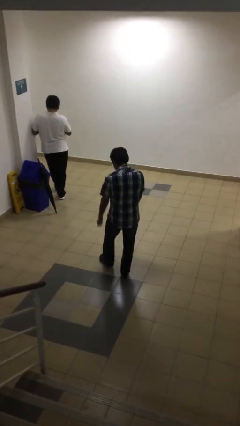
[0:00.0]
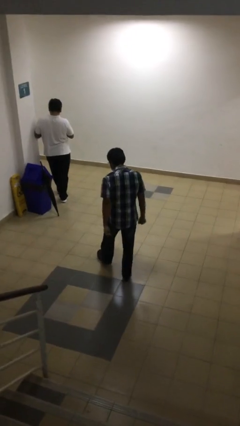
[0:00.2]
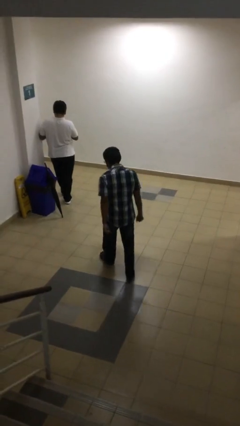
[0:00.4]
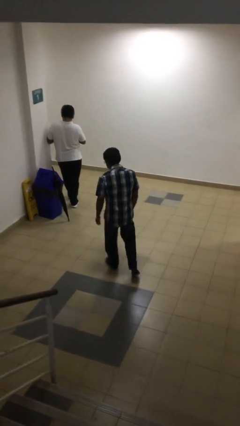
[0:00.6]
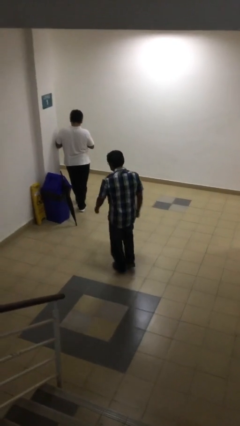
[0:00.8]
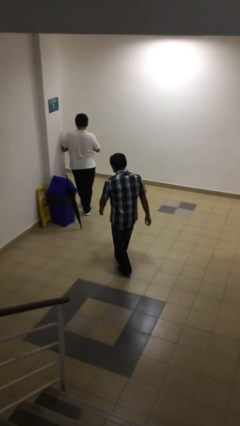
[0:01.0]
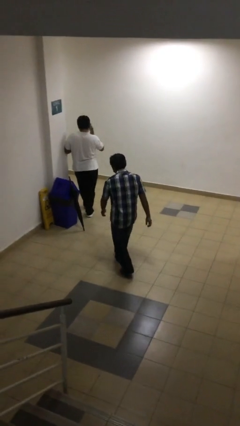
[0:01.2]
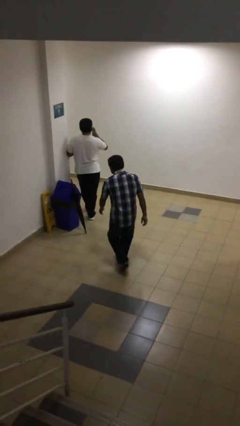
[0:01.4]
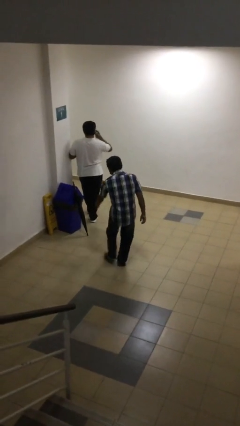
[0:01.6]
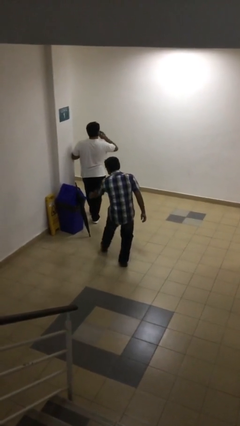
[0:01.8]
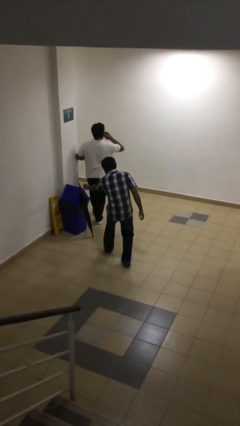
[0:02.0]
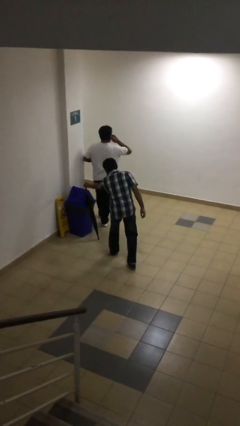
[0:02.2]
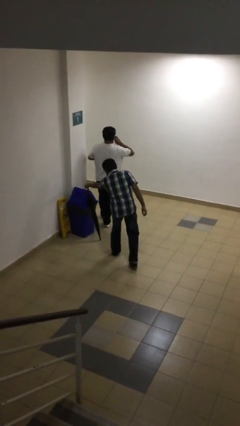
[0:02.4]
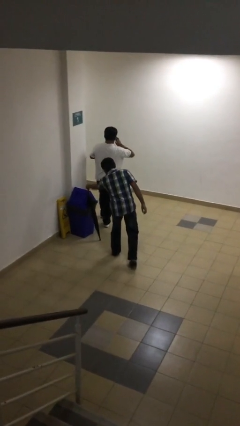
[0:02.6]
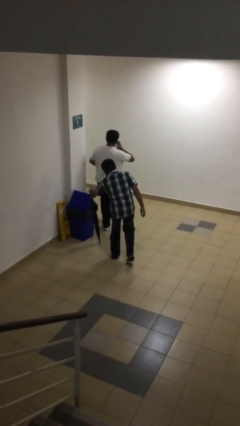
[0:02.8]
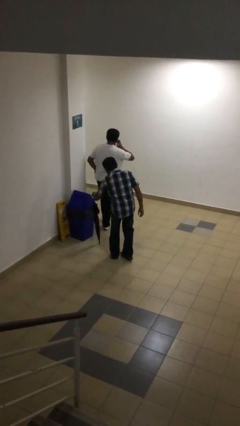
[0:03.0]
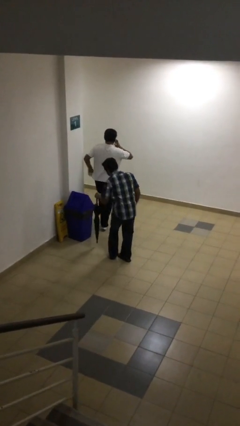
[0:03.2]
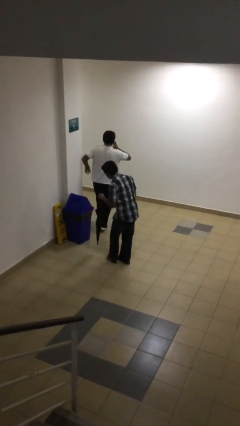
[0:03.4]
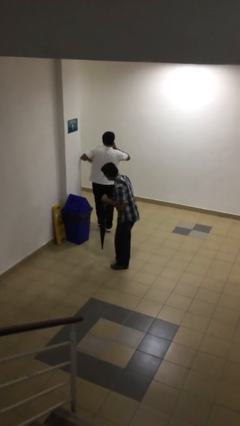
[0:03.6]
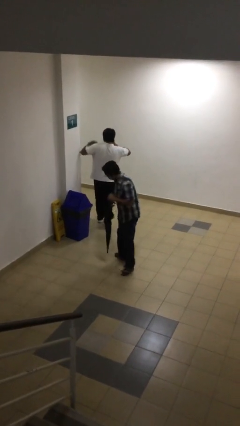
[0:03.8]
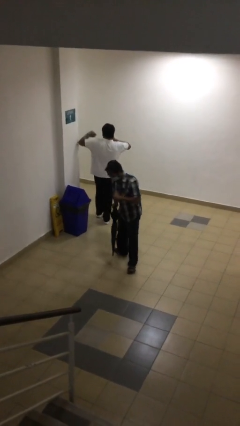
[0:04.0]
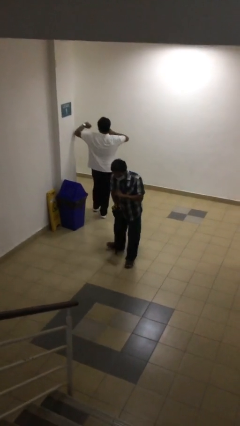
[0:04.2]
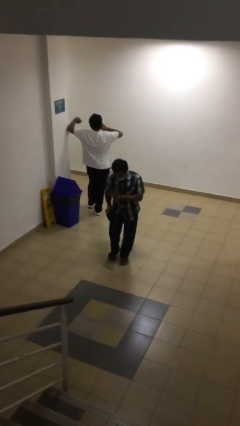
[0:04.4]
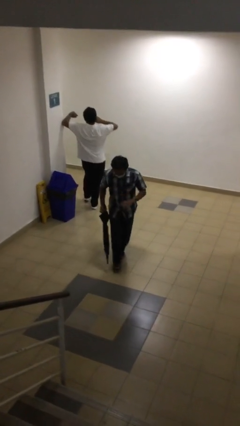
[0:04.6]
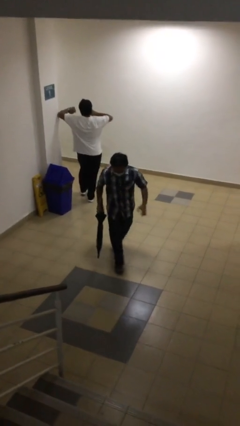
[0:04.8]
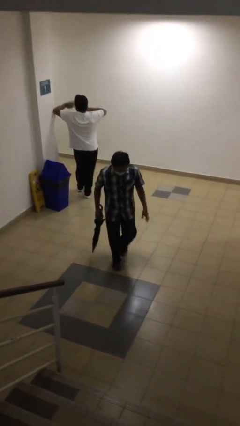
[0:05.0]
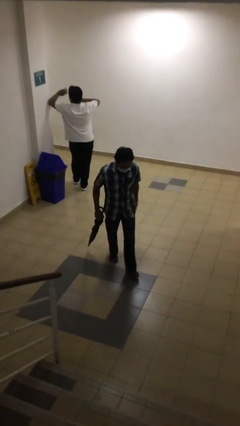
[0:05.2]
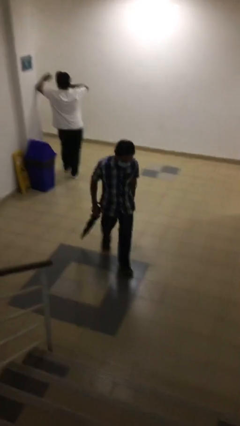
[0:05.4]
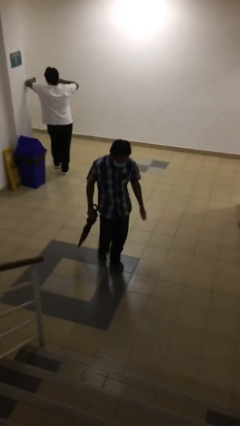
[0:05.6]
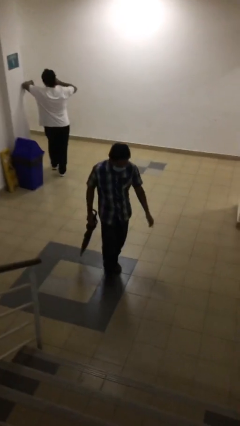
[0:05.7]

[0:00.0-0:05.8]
person steals object from person

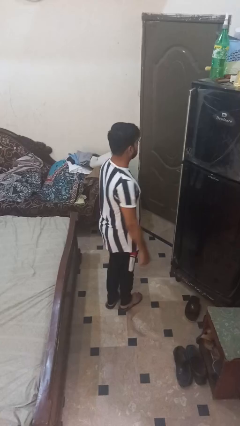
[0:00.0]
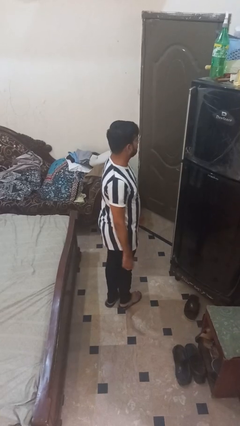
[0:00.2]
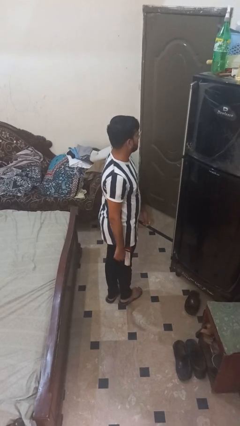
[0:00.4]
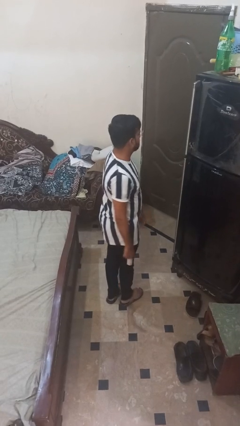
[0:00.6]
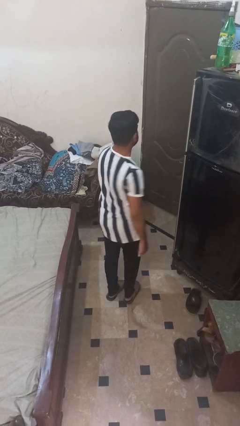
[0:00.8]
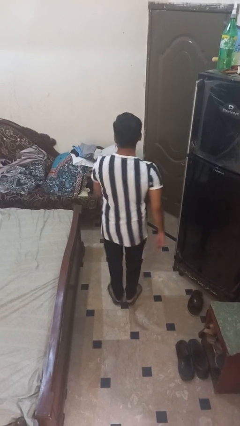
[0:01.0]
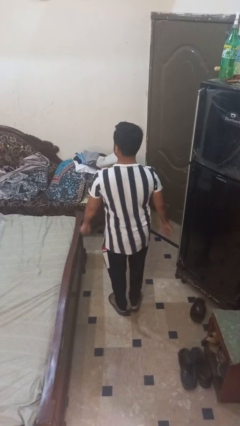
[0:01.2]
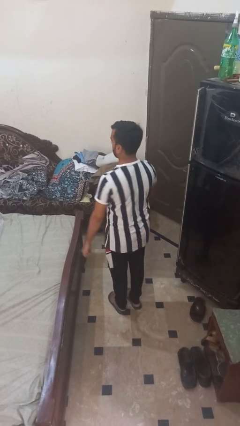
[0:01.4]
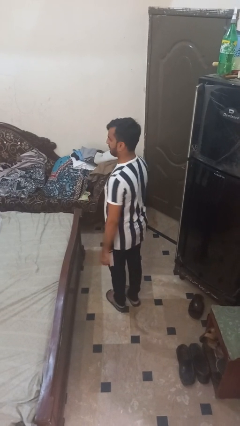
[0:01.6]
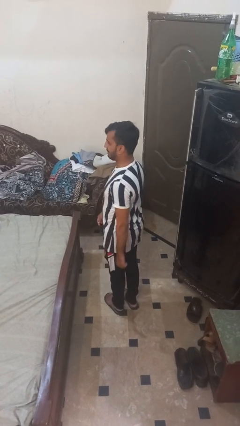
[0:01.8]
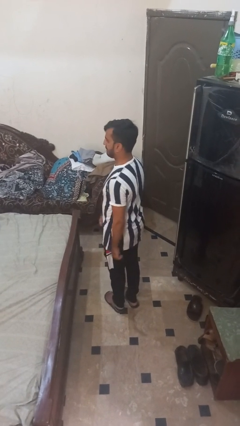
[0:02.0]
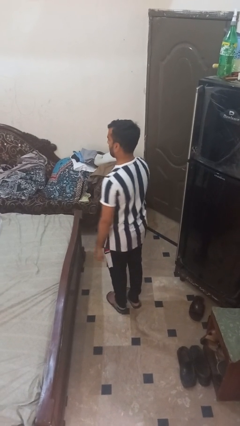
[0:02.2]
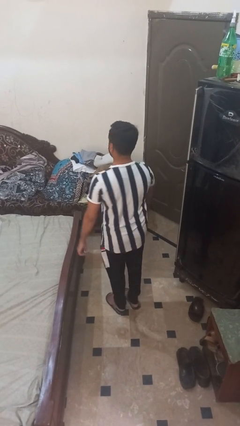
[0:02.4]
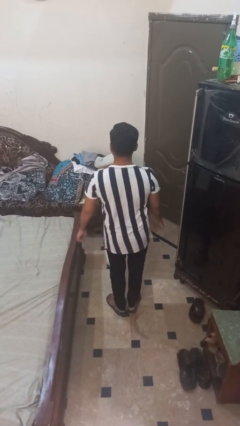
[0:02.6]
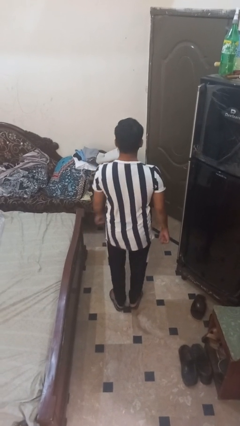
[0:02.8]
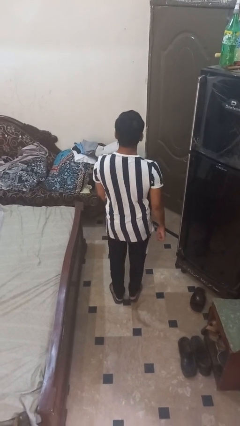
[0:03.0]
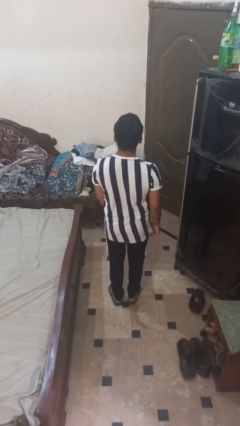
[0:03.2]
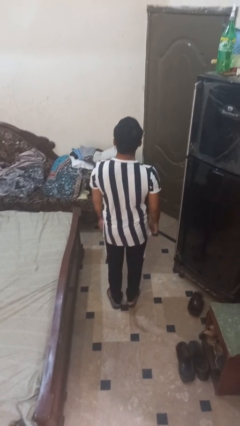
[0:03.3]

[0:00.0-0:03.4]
person twirls

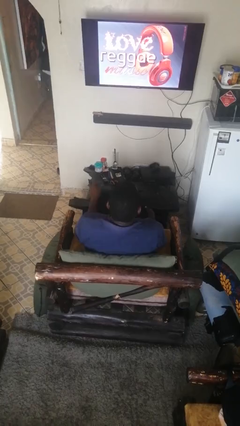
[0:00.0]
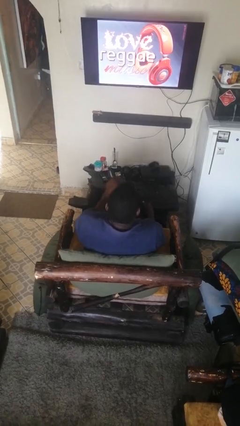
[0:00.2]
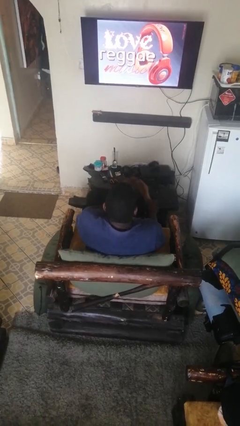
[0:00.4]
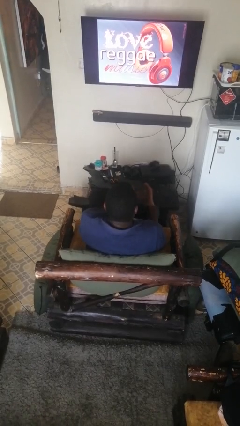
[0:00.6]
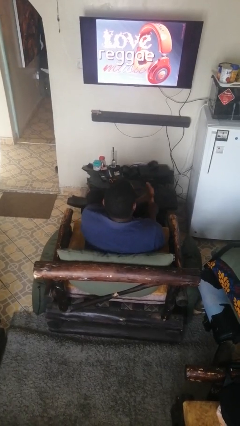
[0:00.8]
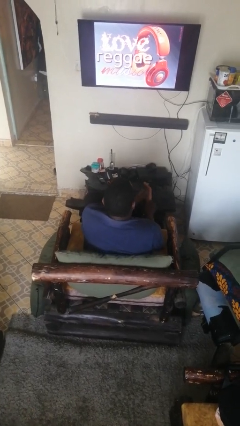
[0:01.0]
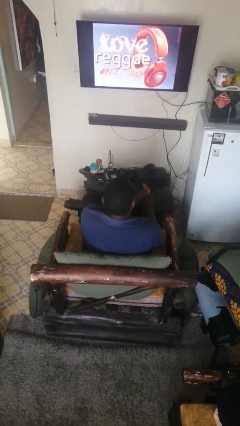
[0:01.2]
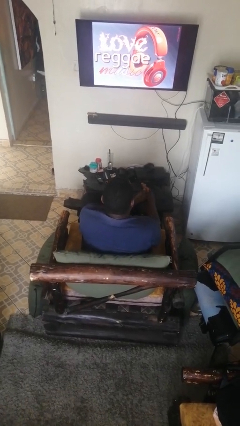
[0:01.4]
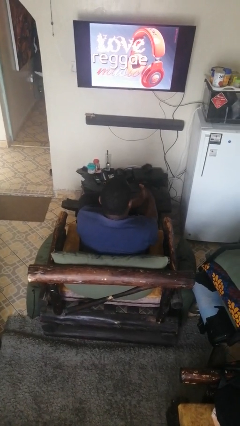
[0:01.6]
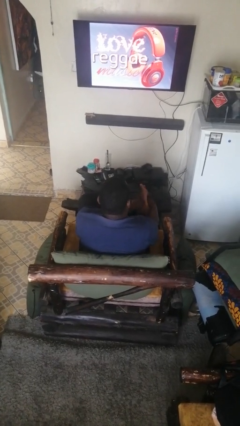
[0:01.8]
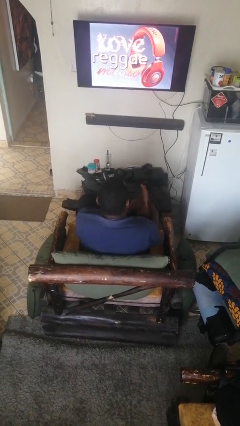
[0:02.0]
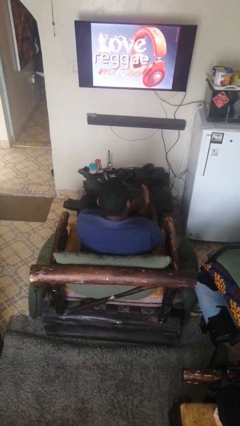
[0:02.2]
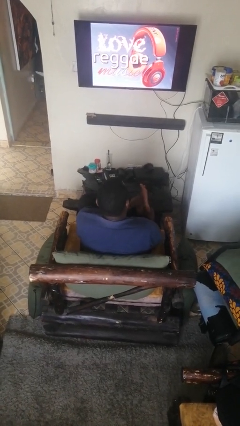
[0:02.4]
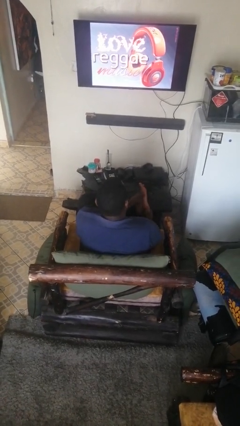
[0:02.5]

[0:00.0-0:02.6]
person rubs foot

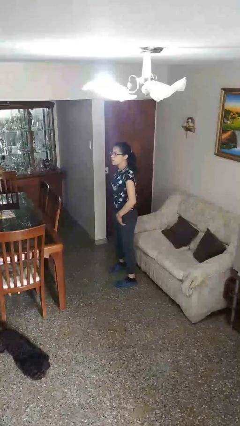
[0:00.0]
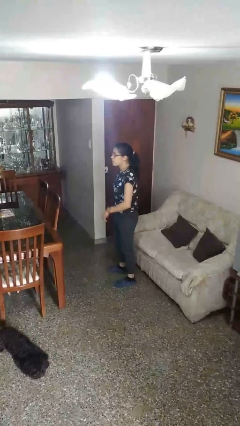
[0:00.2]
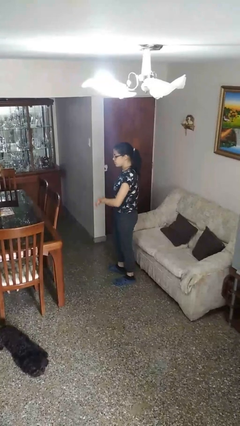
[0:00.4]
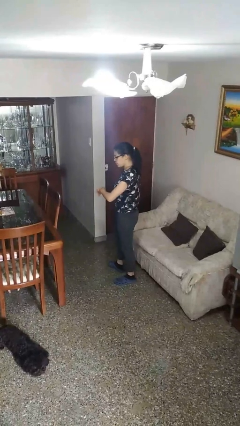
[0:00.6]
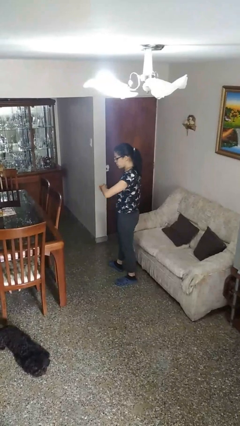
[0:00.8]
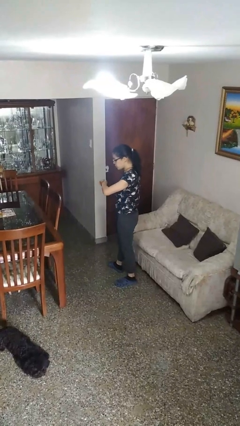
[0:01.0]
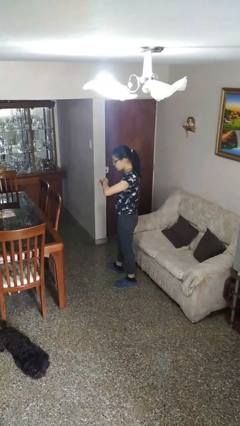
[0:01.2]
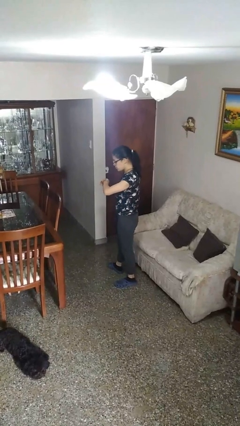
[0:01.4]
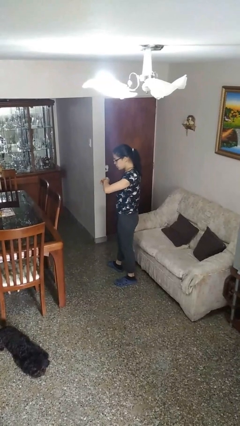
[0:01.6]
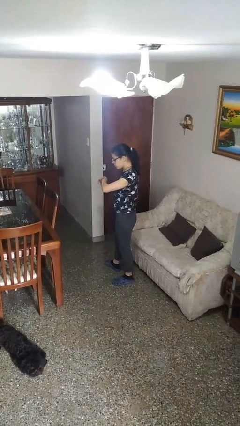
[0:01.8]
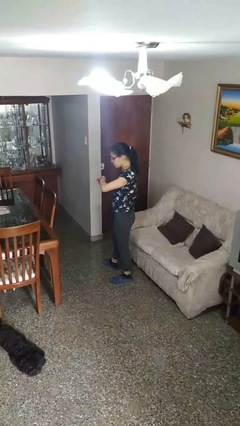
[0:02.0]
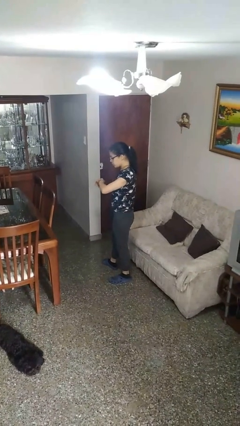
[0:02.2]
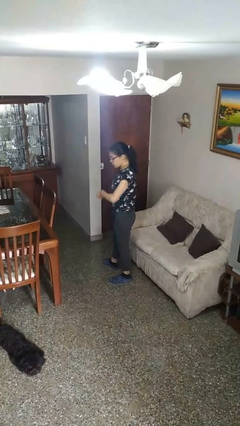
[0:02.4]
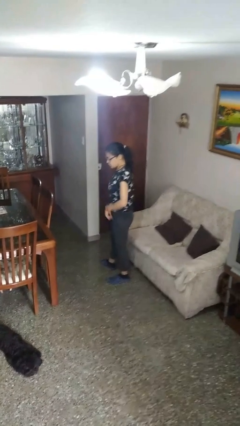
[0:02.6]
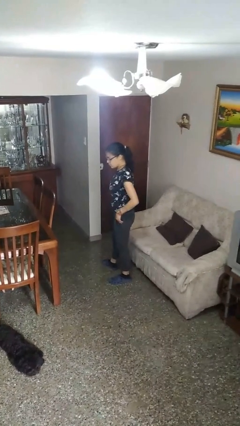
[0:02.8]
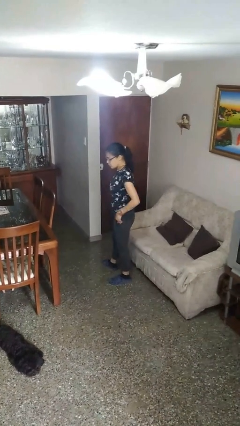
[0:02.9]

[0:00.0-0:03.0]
person looks at wristwatch

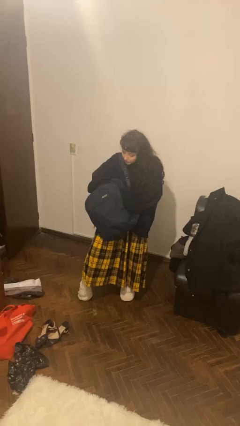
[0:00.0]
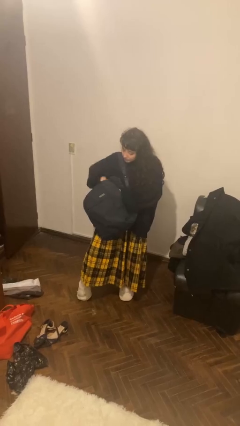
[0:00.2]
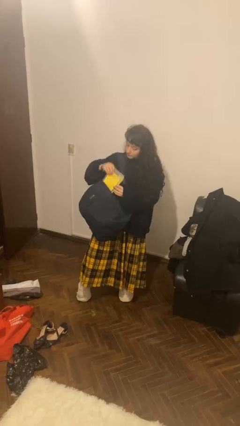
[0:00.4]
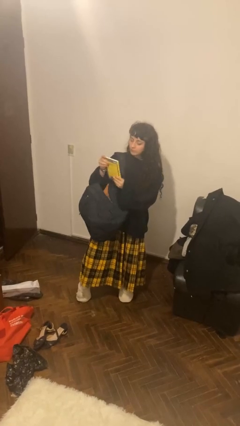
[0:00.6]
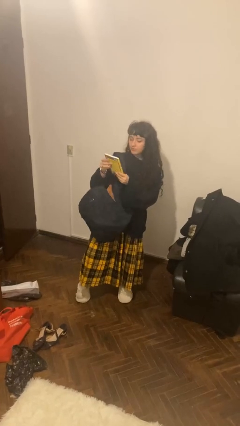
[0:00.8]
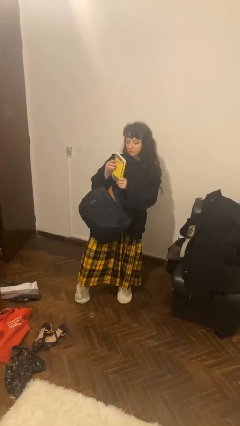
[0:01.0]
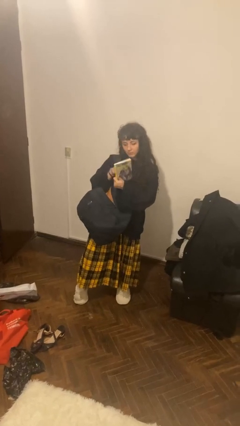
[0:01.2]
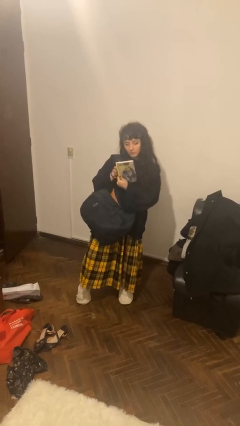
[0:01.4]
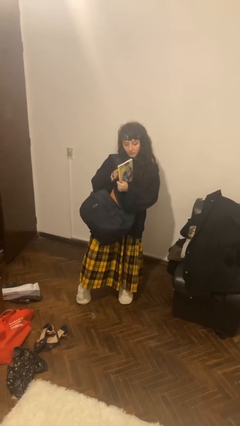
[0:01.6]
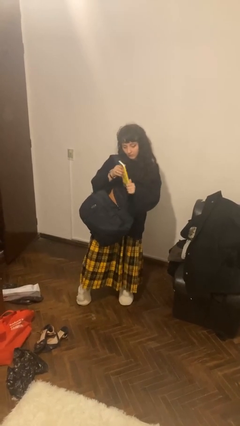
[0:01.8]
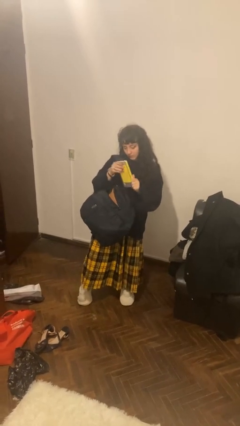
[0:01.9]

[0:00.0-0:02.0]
person takes object from backpack

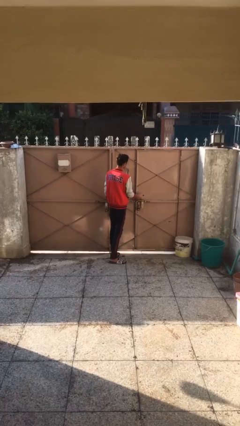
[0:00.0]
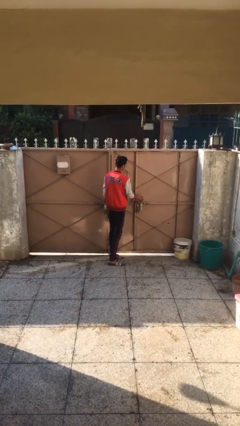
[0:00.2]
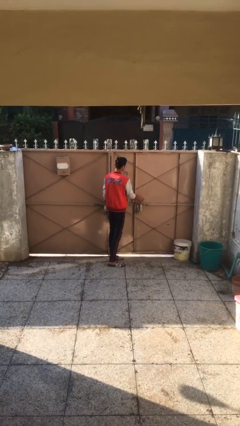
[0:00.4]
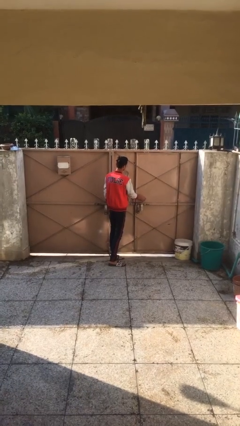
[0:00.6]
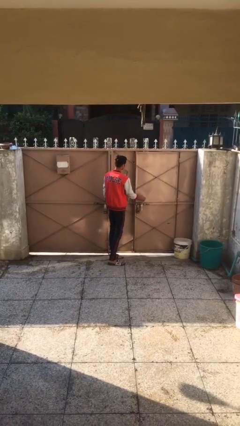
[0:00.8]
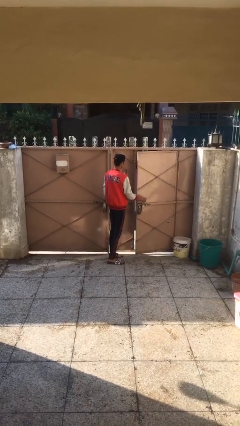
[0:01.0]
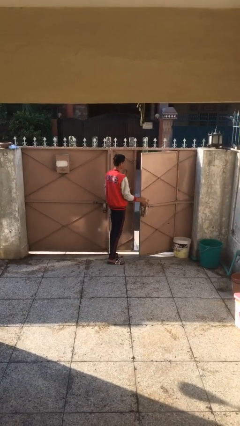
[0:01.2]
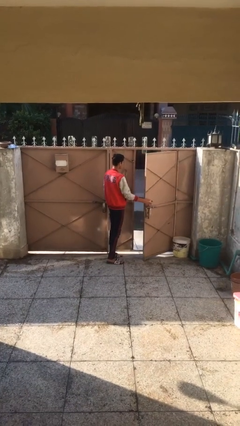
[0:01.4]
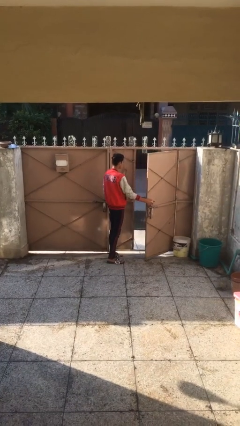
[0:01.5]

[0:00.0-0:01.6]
person opens facility door
